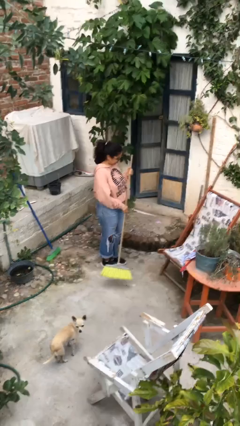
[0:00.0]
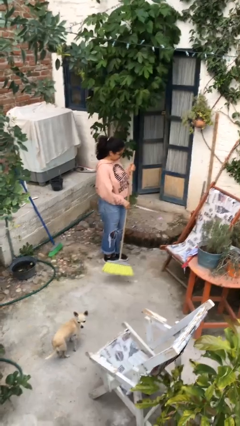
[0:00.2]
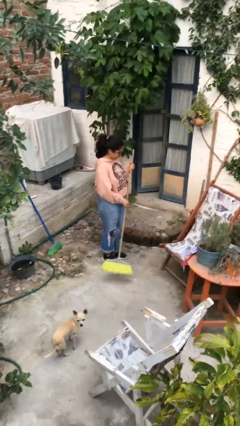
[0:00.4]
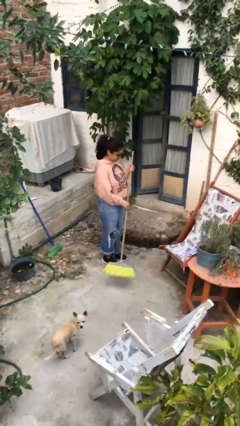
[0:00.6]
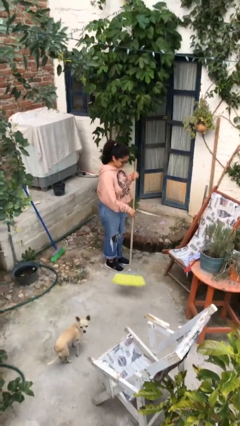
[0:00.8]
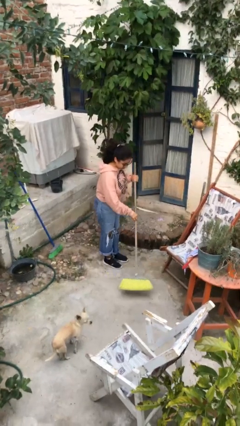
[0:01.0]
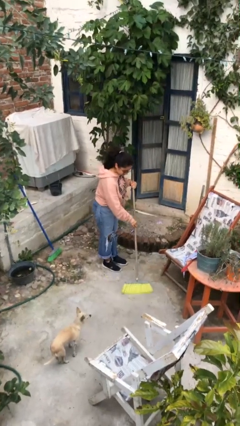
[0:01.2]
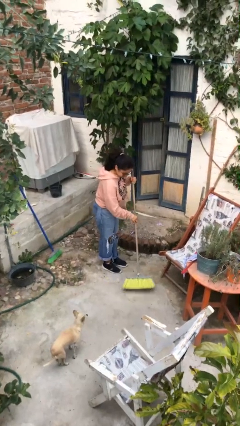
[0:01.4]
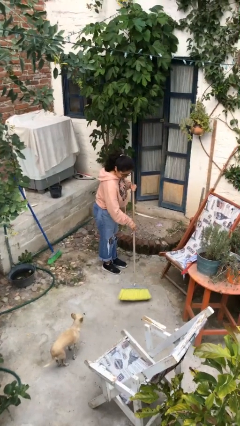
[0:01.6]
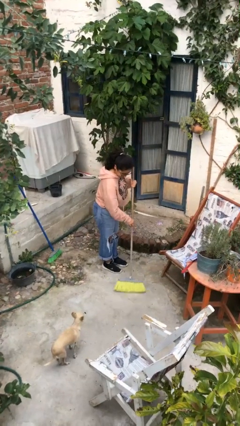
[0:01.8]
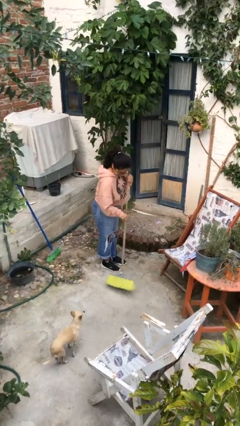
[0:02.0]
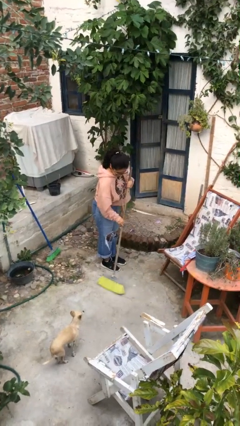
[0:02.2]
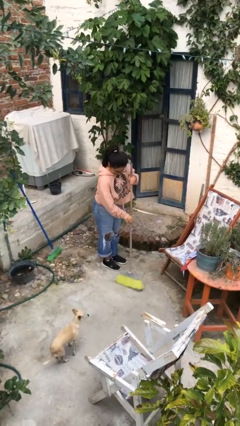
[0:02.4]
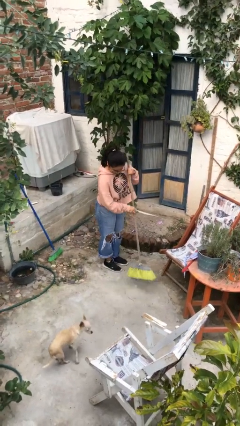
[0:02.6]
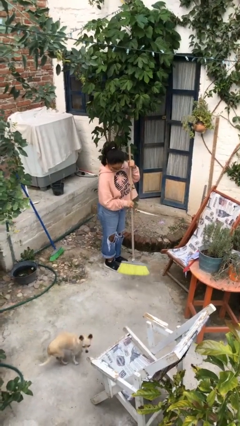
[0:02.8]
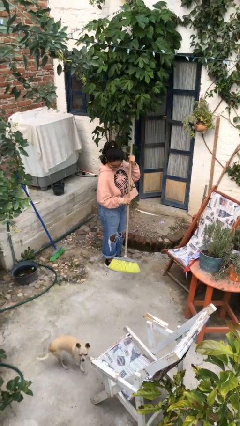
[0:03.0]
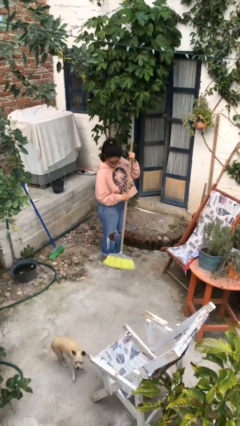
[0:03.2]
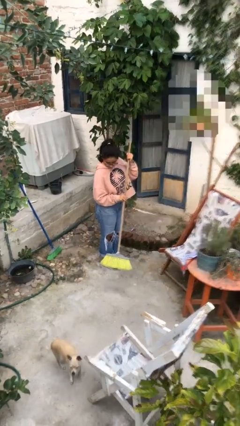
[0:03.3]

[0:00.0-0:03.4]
person sweeps floor

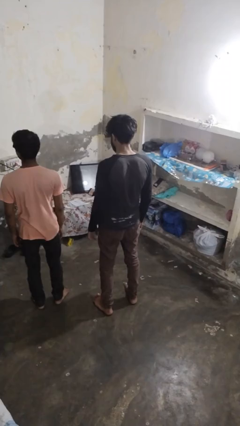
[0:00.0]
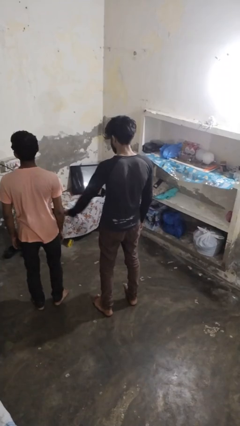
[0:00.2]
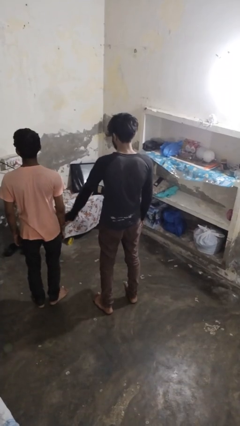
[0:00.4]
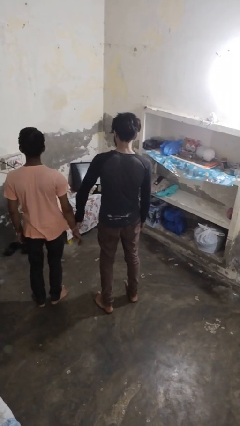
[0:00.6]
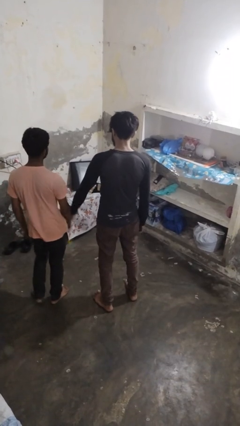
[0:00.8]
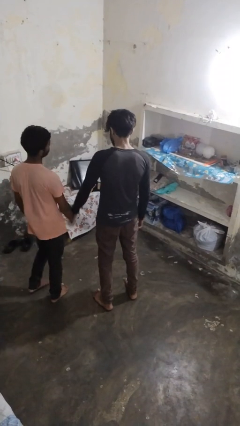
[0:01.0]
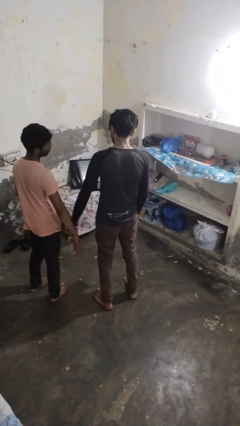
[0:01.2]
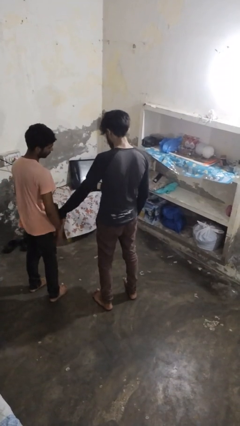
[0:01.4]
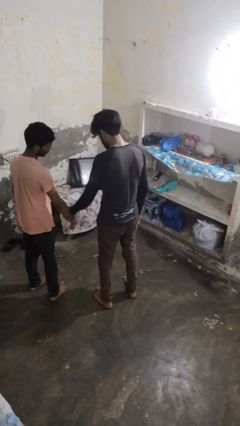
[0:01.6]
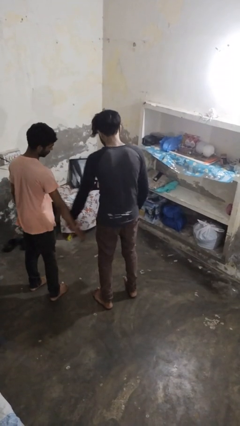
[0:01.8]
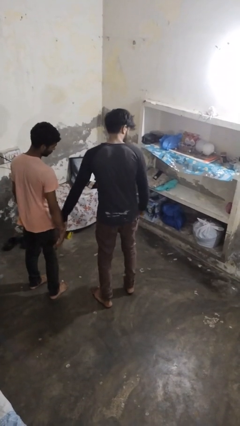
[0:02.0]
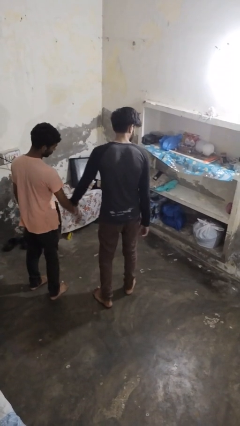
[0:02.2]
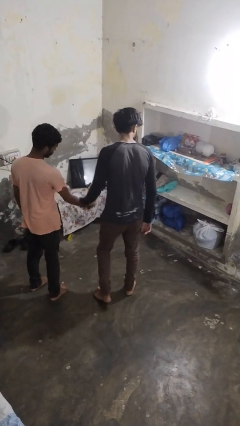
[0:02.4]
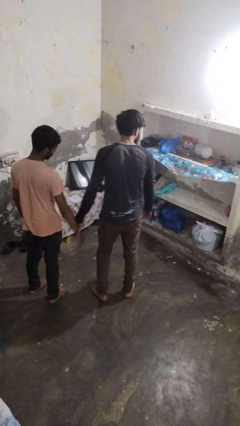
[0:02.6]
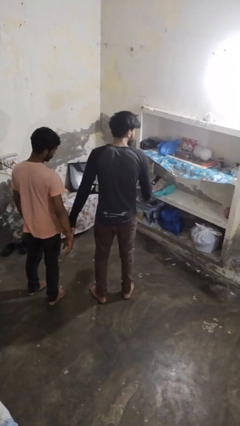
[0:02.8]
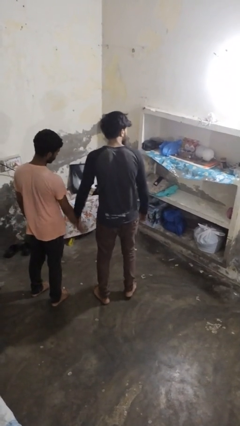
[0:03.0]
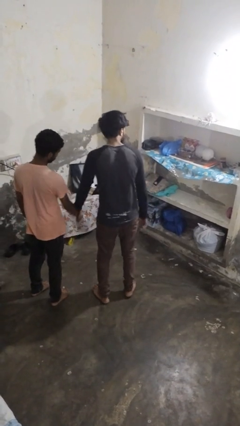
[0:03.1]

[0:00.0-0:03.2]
person grabs person by forearm

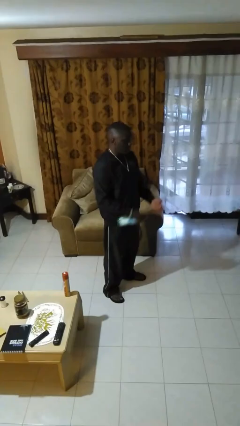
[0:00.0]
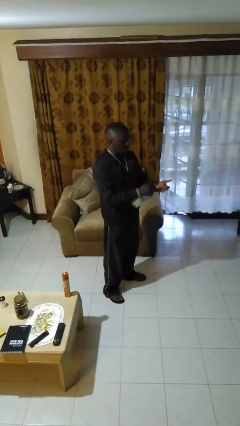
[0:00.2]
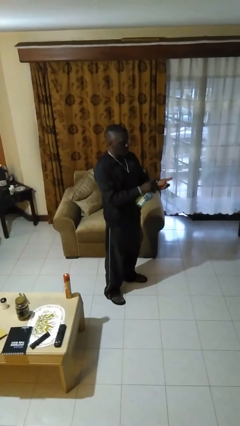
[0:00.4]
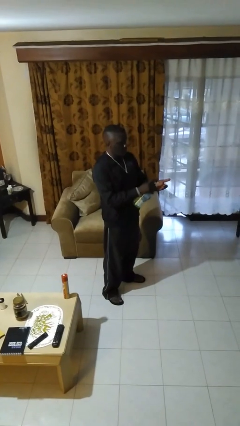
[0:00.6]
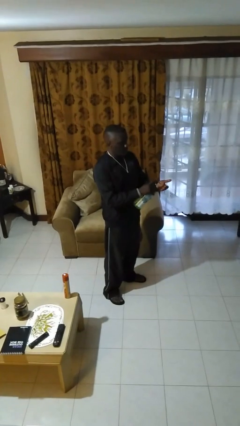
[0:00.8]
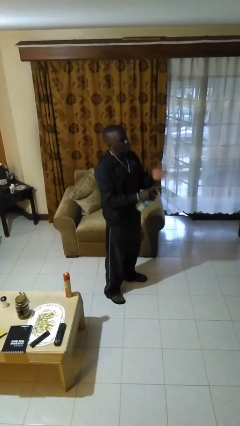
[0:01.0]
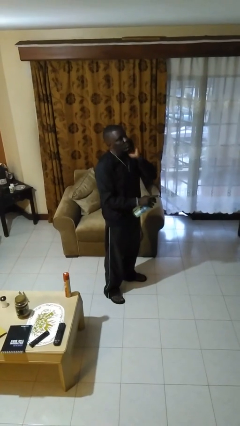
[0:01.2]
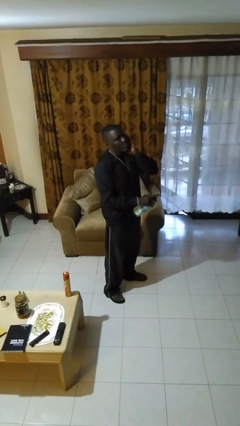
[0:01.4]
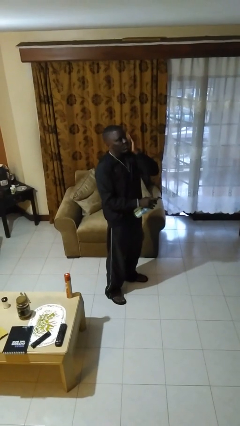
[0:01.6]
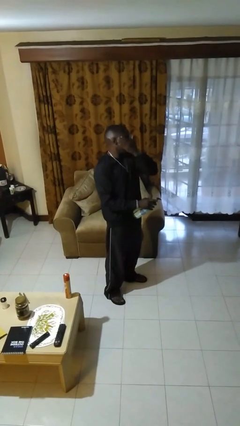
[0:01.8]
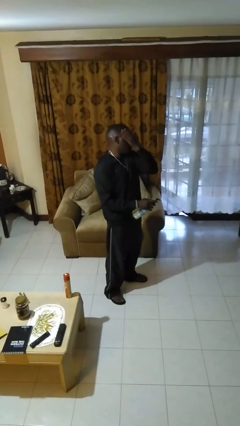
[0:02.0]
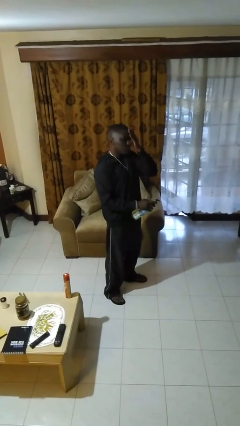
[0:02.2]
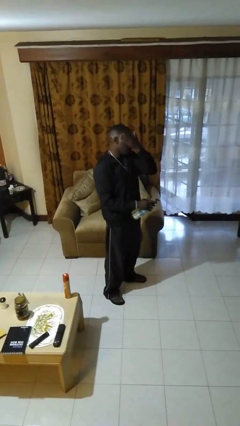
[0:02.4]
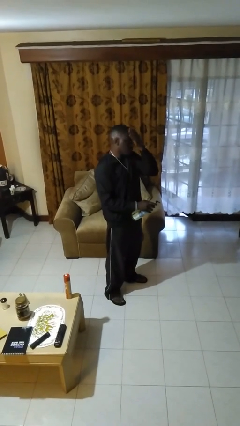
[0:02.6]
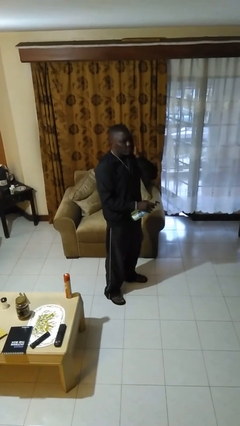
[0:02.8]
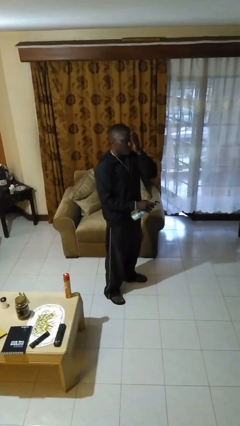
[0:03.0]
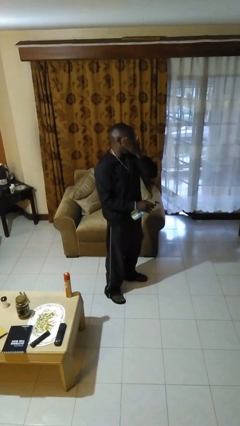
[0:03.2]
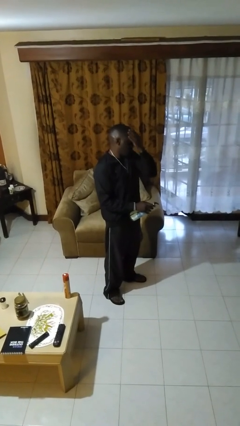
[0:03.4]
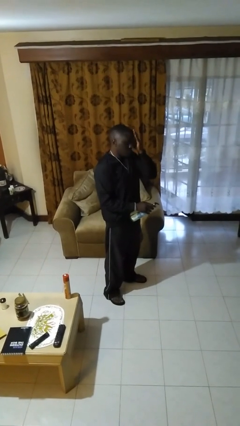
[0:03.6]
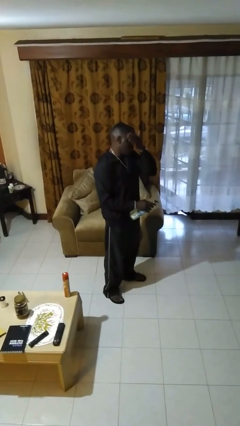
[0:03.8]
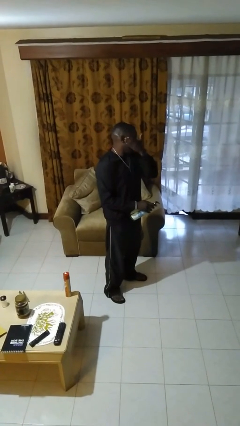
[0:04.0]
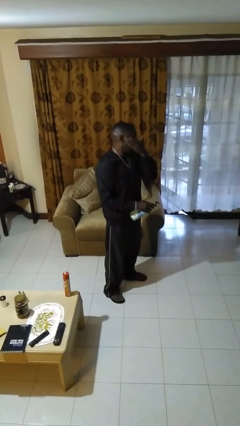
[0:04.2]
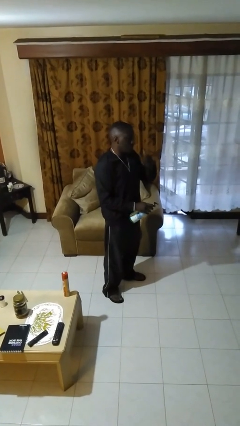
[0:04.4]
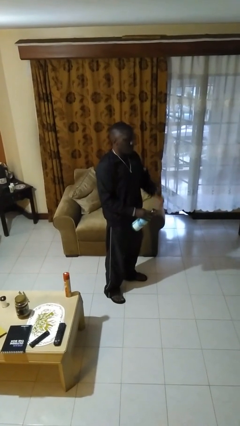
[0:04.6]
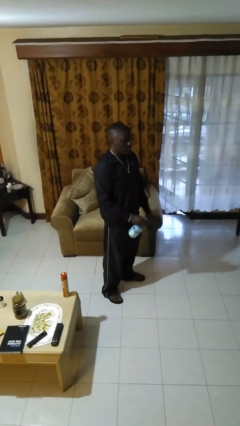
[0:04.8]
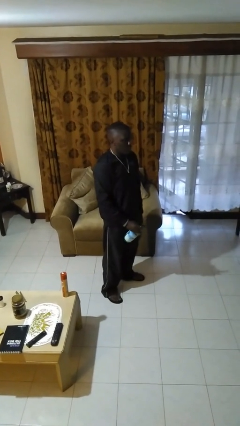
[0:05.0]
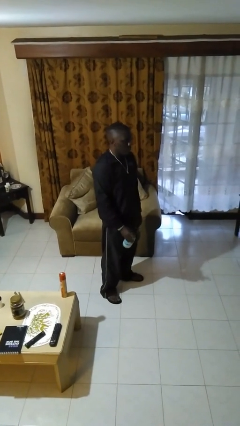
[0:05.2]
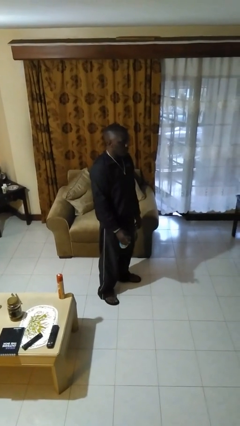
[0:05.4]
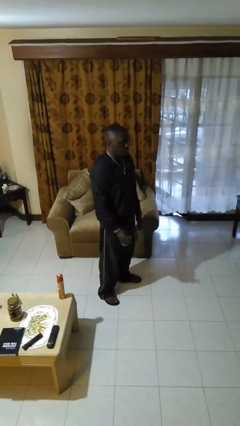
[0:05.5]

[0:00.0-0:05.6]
person applies facial moisturizer

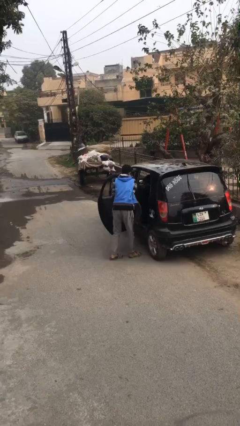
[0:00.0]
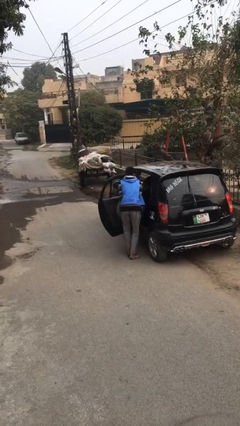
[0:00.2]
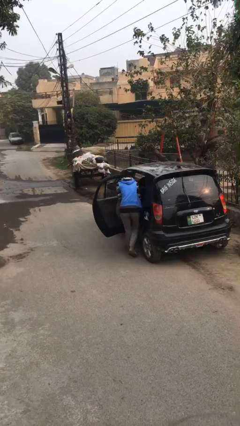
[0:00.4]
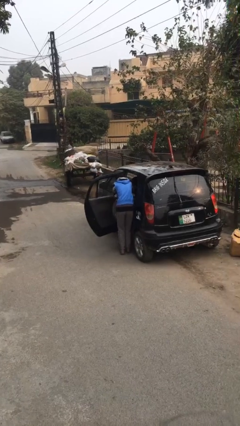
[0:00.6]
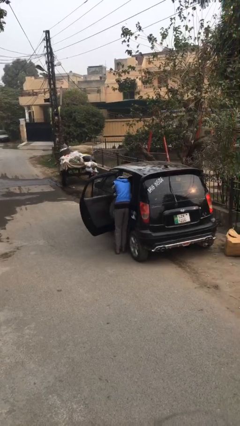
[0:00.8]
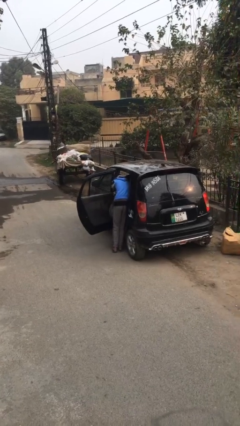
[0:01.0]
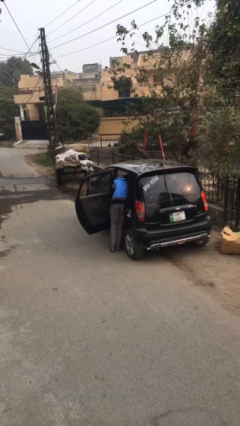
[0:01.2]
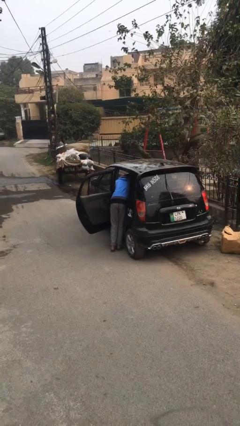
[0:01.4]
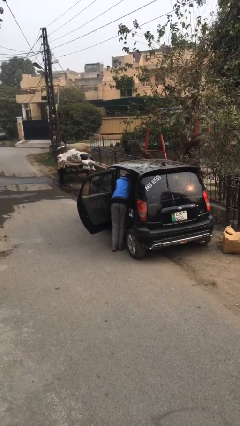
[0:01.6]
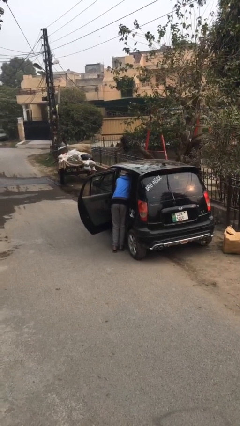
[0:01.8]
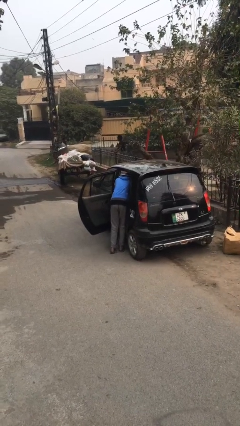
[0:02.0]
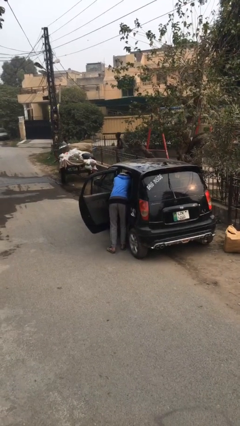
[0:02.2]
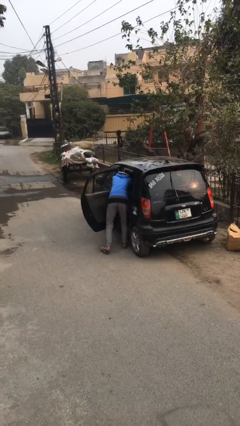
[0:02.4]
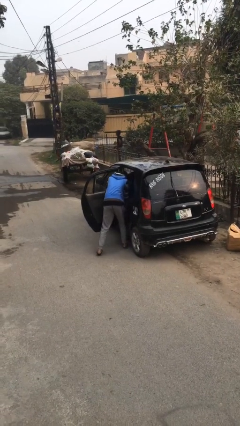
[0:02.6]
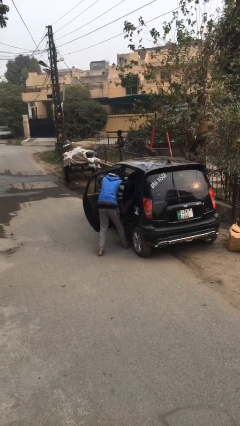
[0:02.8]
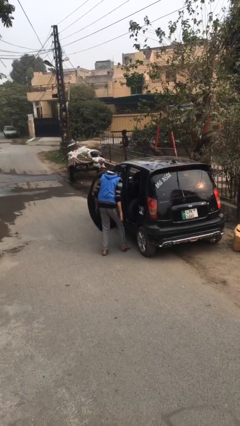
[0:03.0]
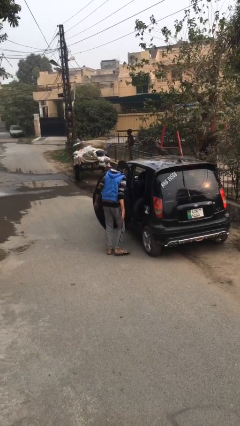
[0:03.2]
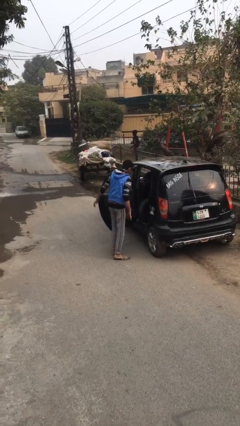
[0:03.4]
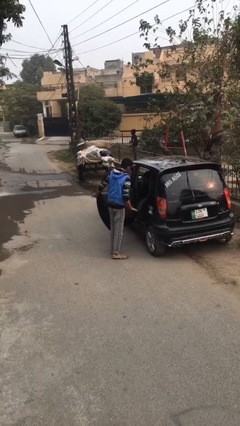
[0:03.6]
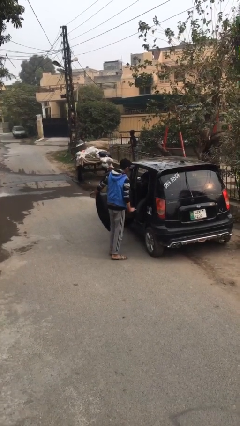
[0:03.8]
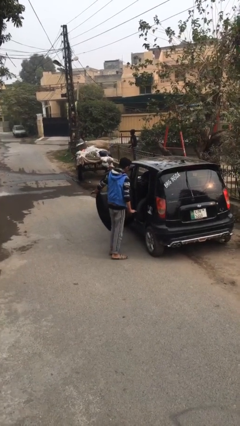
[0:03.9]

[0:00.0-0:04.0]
person loads car

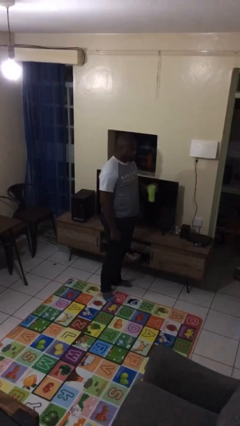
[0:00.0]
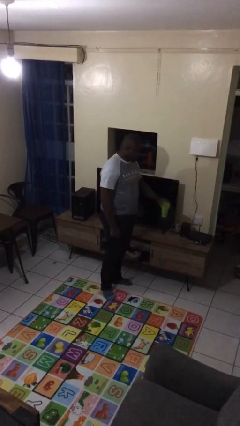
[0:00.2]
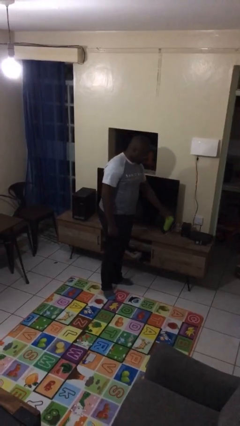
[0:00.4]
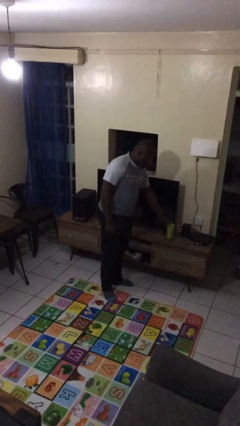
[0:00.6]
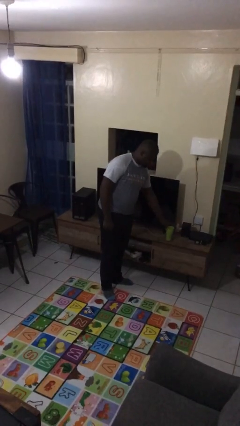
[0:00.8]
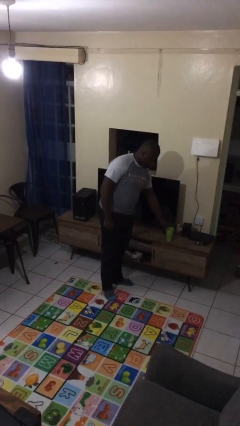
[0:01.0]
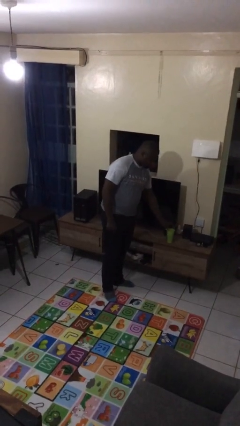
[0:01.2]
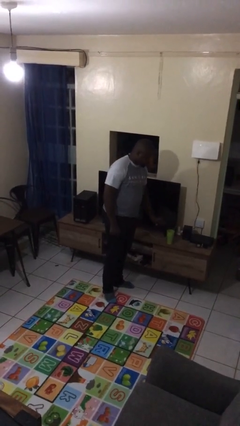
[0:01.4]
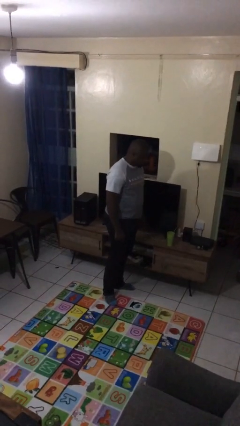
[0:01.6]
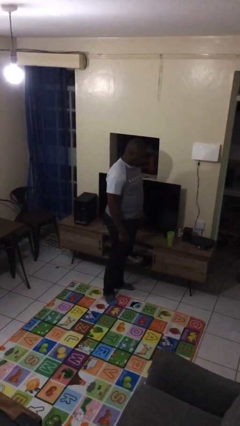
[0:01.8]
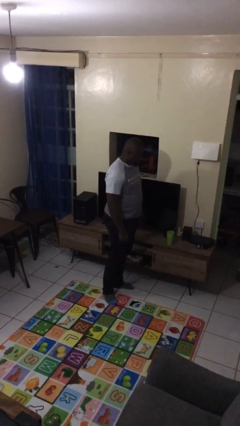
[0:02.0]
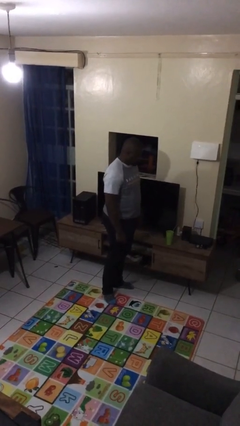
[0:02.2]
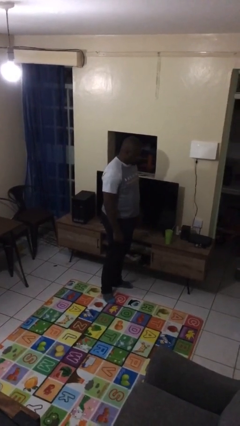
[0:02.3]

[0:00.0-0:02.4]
person puts down object on countertop
